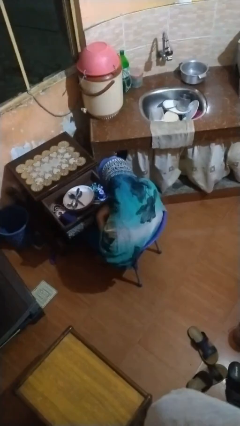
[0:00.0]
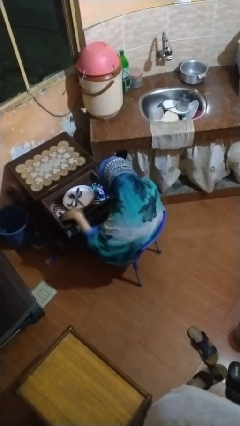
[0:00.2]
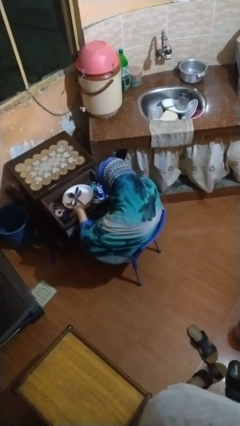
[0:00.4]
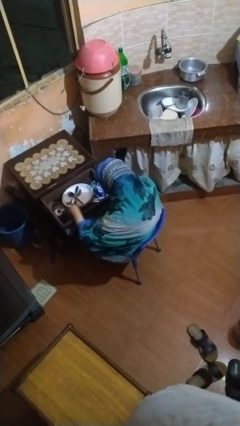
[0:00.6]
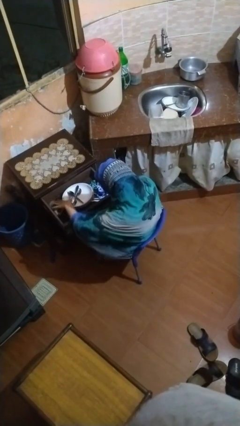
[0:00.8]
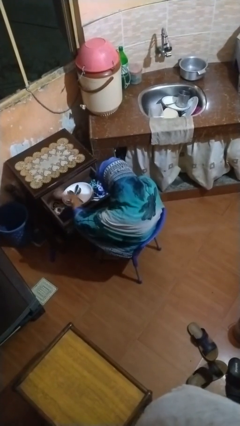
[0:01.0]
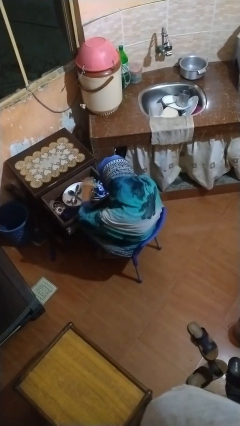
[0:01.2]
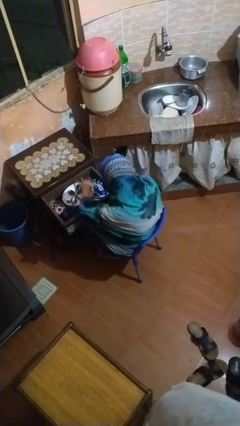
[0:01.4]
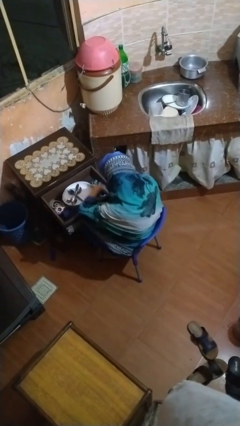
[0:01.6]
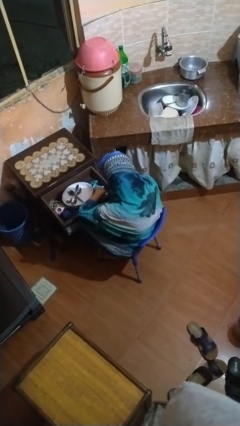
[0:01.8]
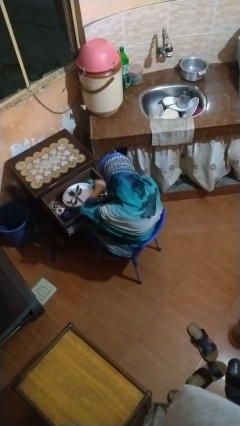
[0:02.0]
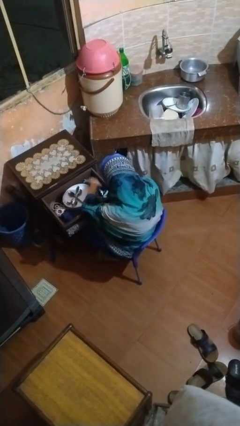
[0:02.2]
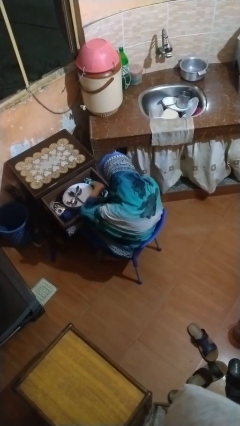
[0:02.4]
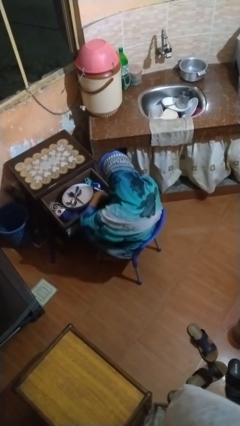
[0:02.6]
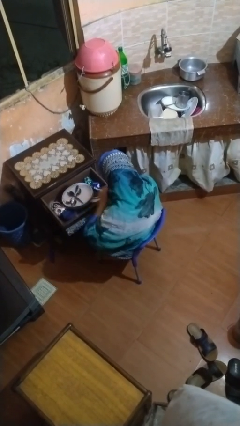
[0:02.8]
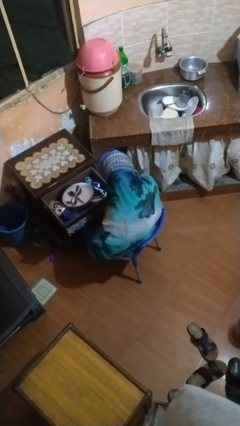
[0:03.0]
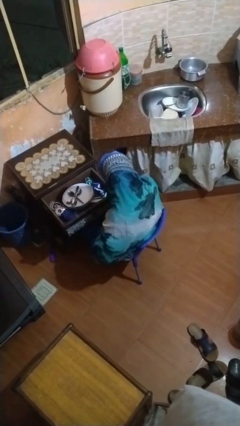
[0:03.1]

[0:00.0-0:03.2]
person searches in kitchen drawer

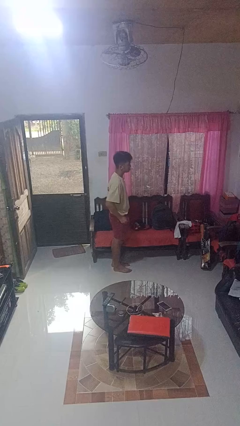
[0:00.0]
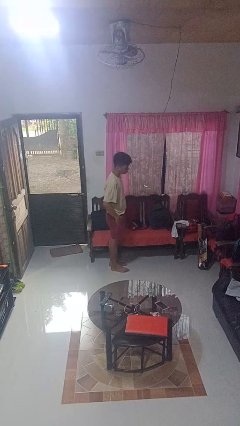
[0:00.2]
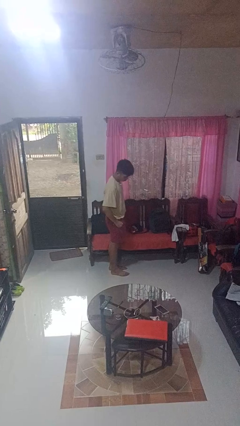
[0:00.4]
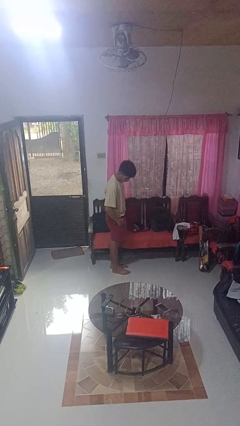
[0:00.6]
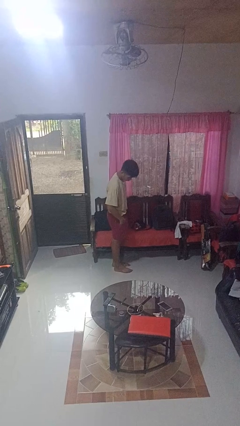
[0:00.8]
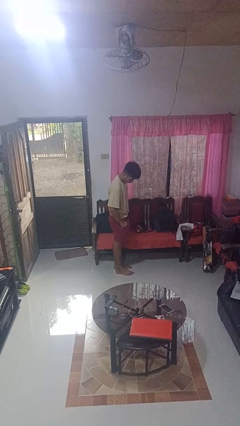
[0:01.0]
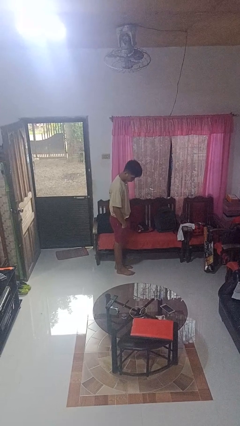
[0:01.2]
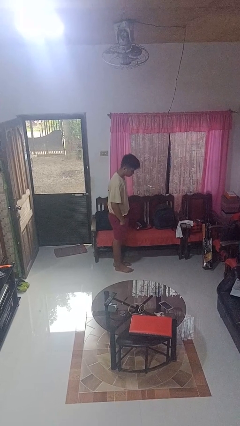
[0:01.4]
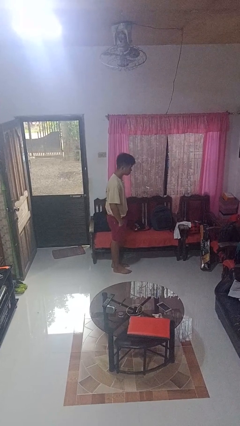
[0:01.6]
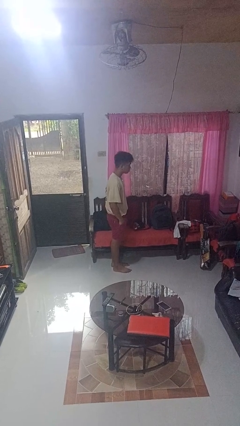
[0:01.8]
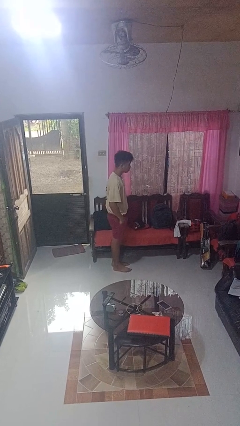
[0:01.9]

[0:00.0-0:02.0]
person puts hands in back pockets

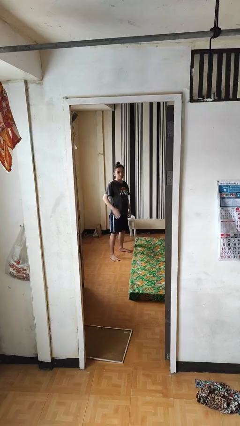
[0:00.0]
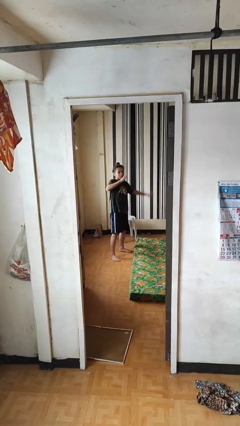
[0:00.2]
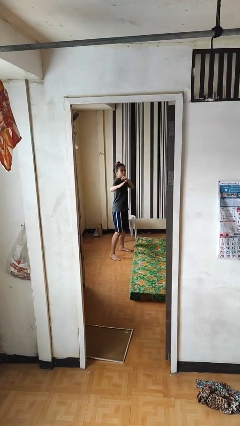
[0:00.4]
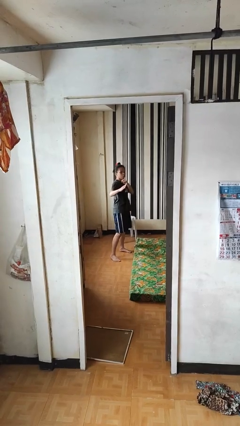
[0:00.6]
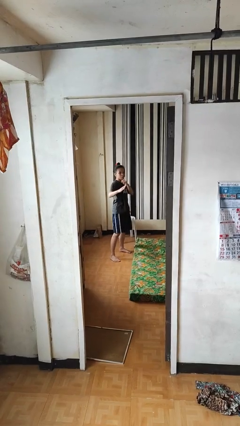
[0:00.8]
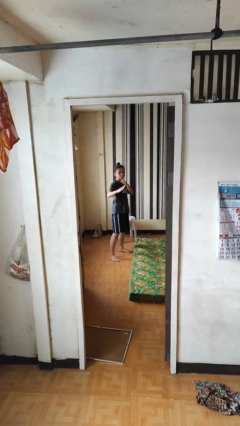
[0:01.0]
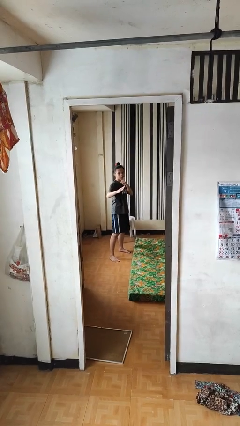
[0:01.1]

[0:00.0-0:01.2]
person karate chop

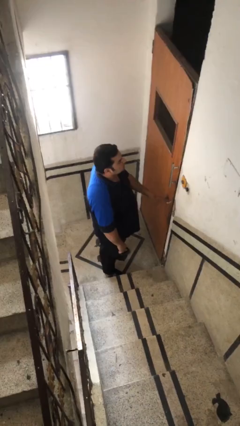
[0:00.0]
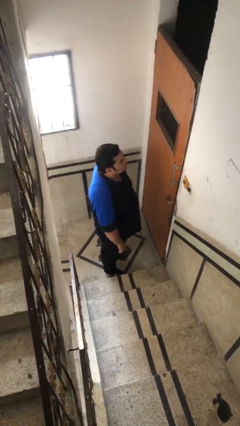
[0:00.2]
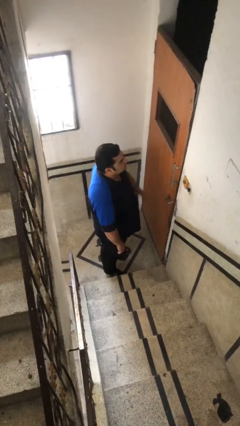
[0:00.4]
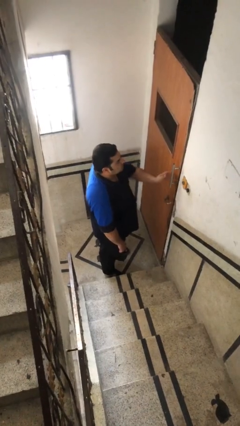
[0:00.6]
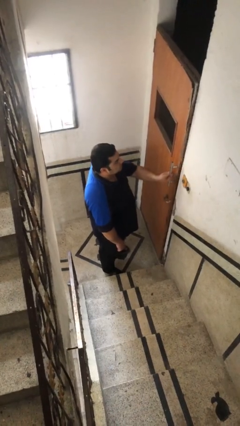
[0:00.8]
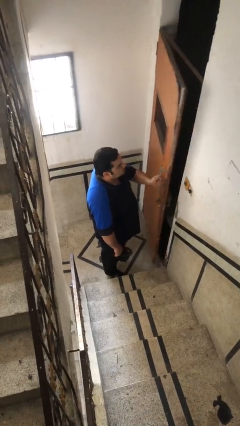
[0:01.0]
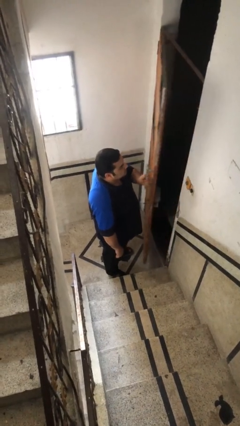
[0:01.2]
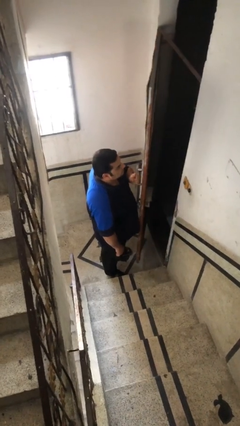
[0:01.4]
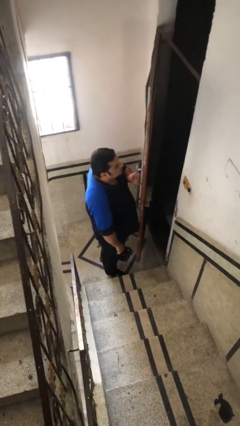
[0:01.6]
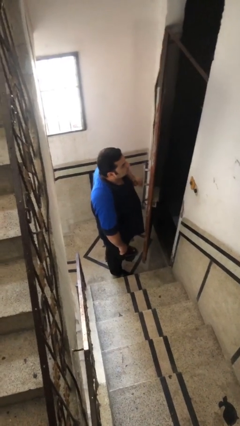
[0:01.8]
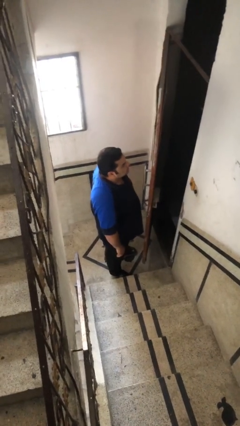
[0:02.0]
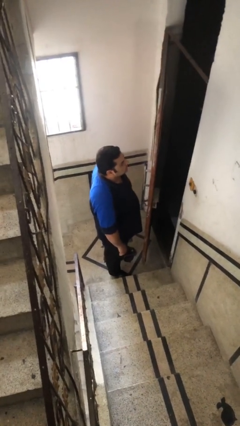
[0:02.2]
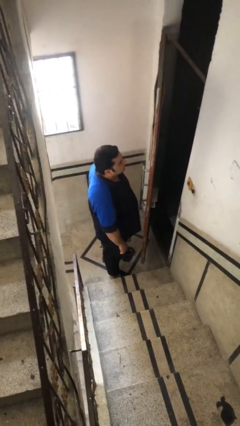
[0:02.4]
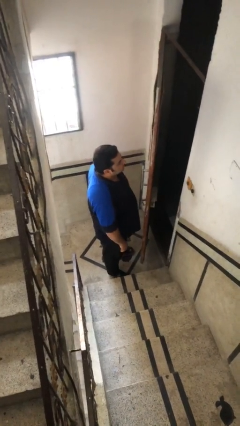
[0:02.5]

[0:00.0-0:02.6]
person opens facility door

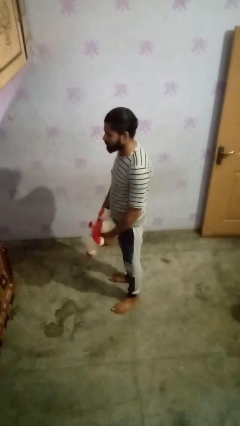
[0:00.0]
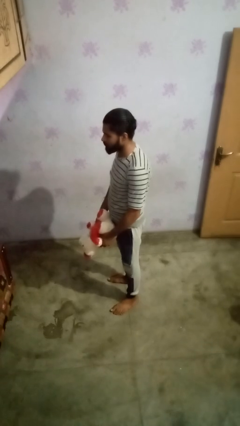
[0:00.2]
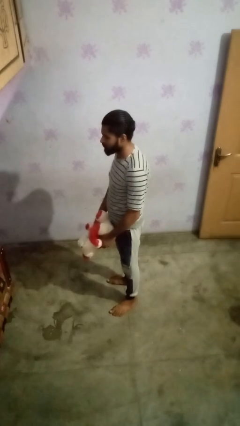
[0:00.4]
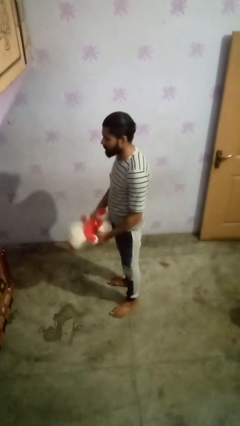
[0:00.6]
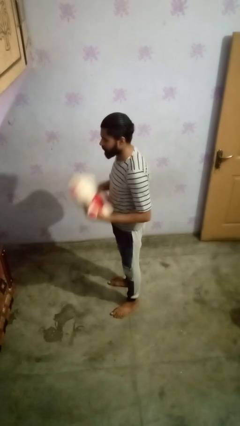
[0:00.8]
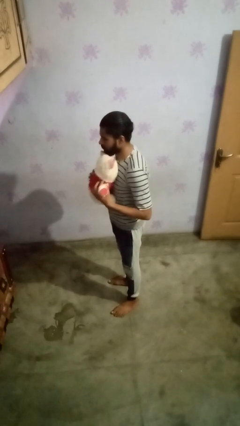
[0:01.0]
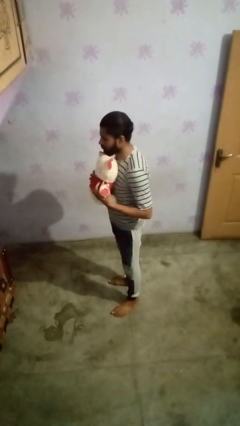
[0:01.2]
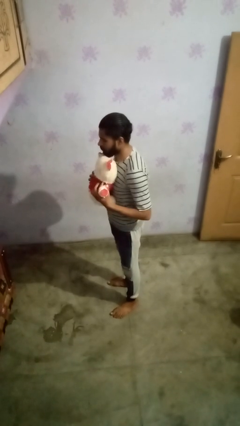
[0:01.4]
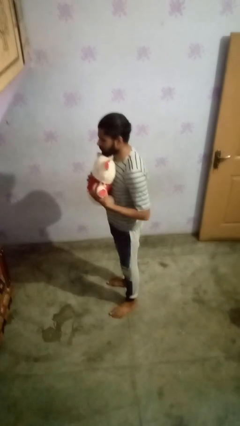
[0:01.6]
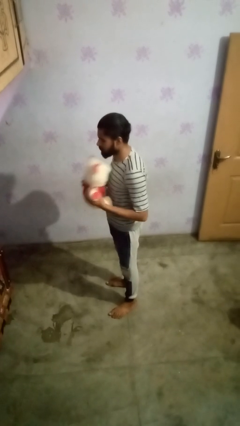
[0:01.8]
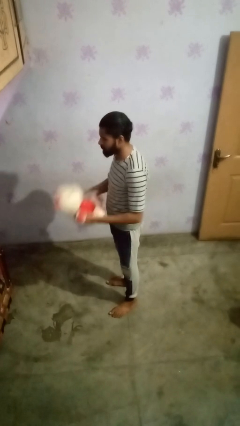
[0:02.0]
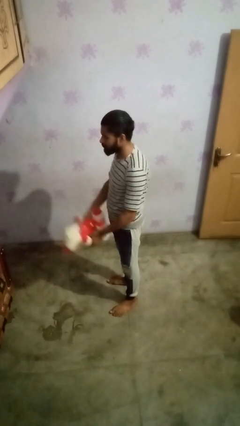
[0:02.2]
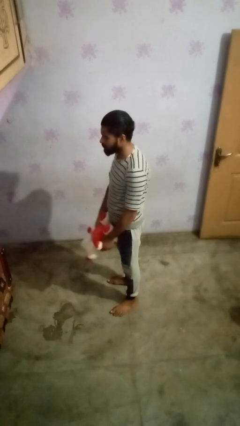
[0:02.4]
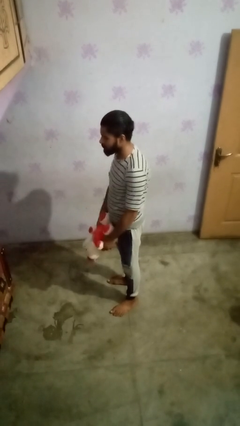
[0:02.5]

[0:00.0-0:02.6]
person hugs stuffed animal

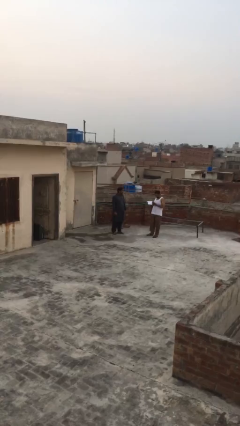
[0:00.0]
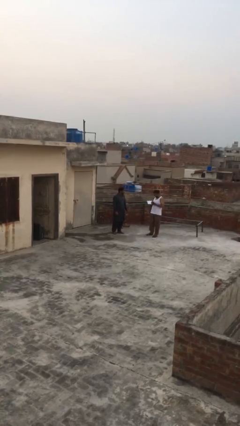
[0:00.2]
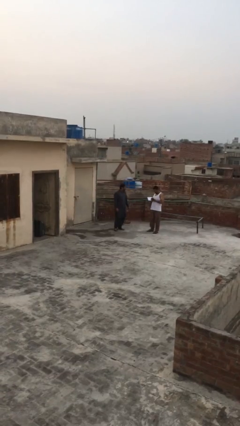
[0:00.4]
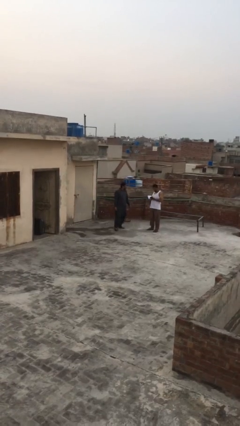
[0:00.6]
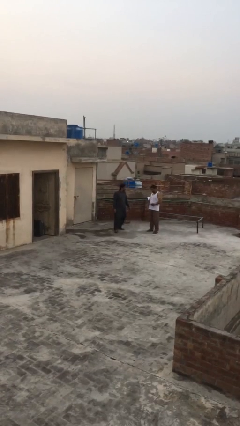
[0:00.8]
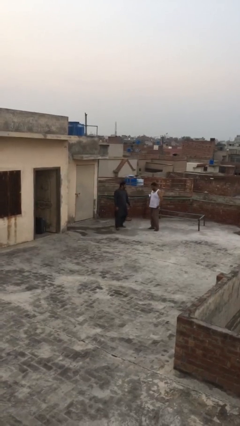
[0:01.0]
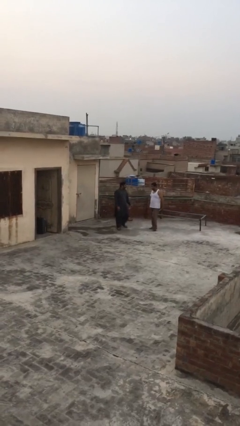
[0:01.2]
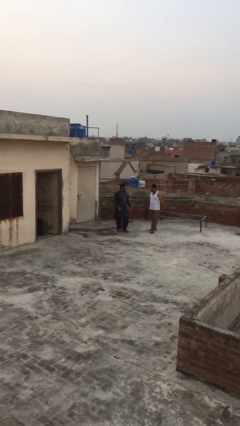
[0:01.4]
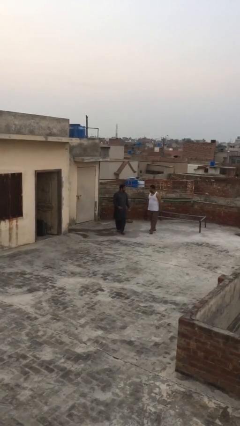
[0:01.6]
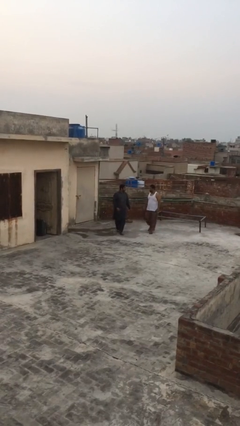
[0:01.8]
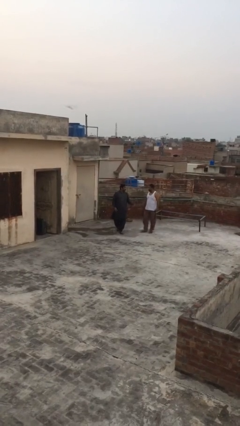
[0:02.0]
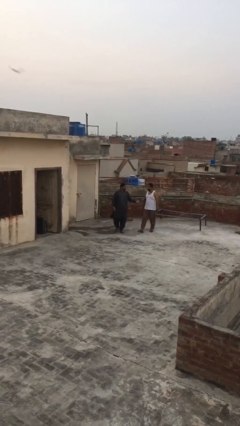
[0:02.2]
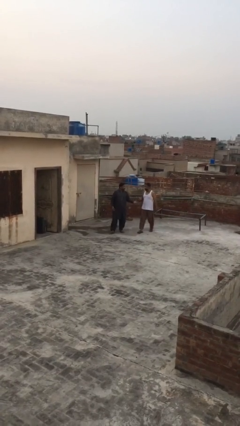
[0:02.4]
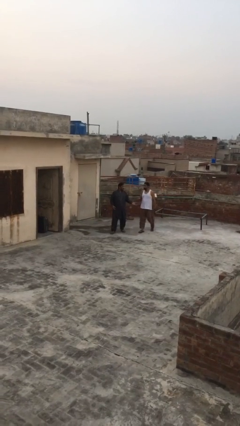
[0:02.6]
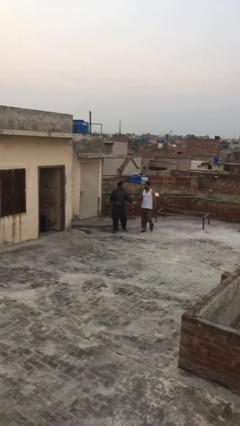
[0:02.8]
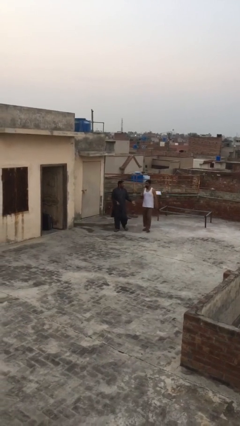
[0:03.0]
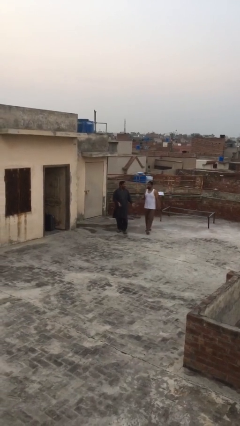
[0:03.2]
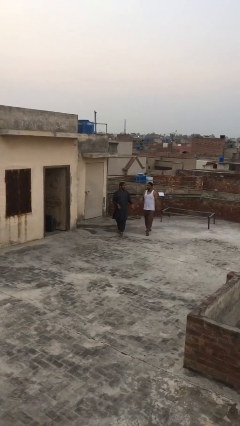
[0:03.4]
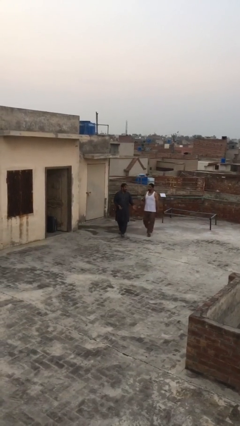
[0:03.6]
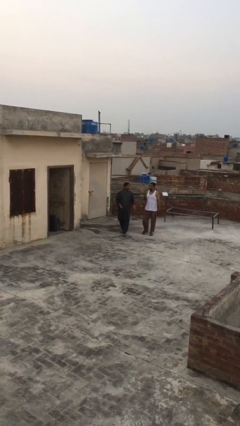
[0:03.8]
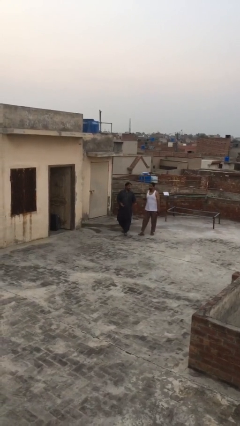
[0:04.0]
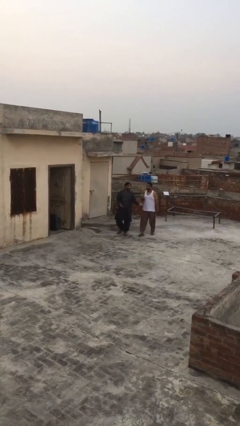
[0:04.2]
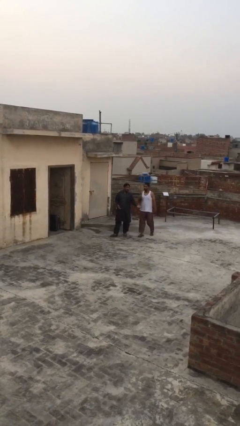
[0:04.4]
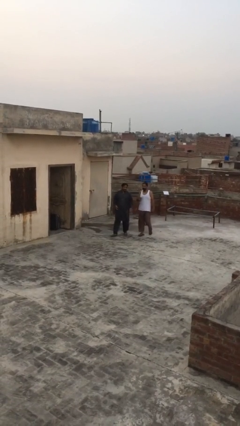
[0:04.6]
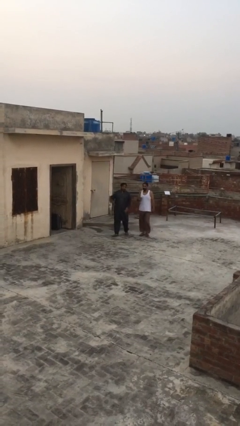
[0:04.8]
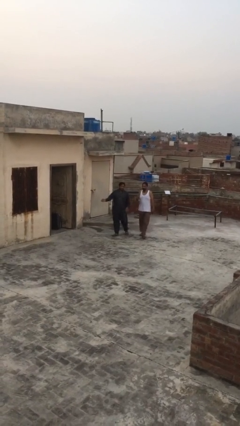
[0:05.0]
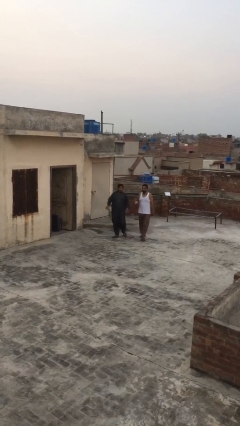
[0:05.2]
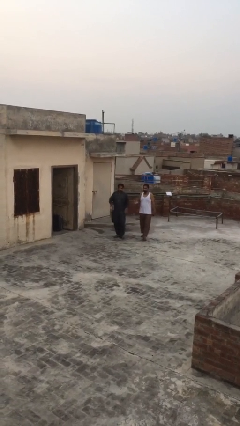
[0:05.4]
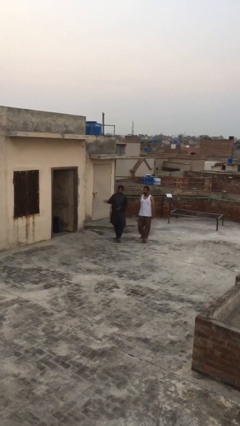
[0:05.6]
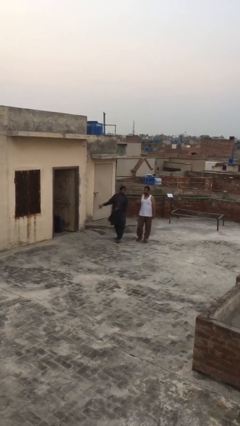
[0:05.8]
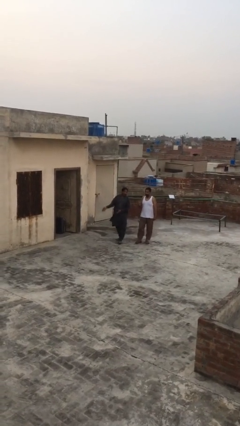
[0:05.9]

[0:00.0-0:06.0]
person talks to person
